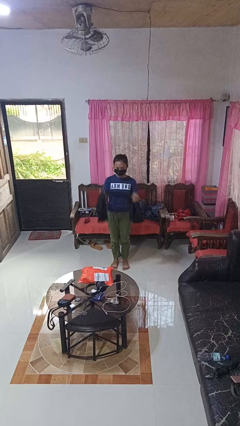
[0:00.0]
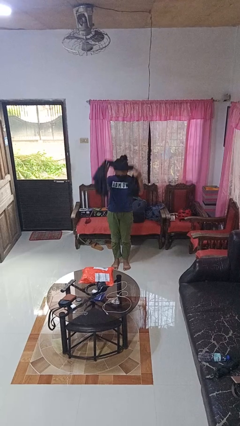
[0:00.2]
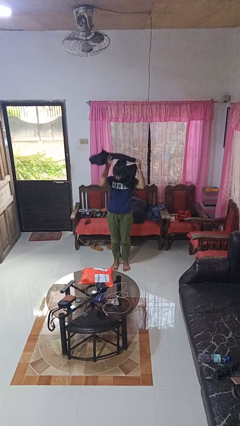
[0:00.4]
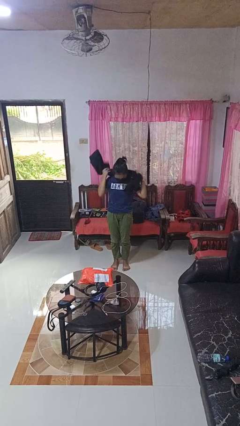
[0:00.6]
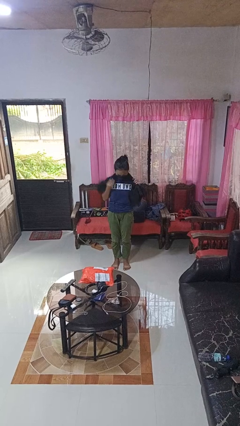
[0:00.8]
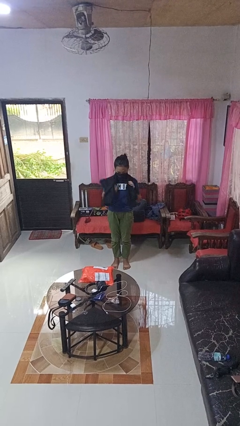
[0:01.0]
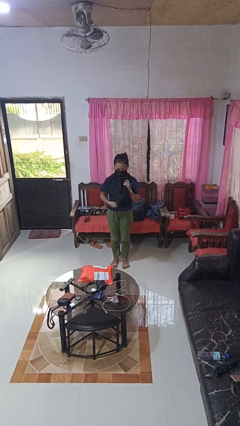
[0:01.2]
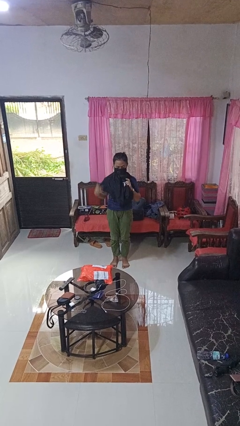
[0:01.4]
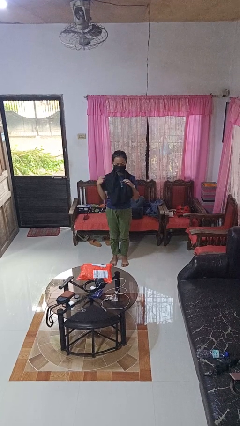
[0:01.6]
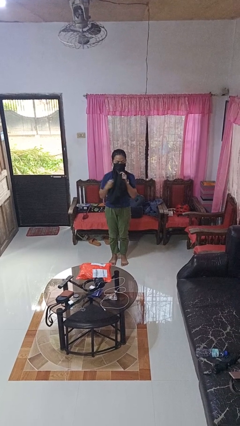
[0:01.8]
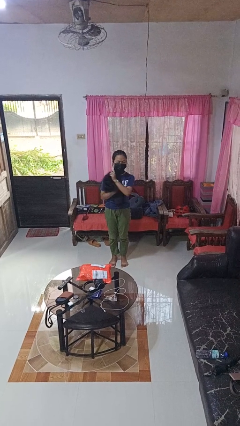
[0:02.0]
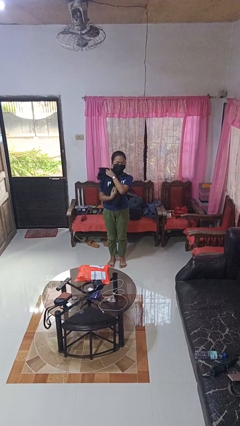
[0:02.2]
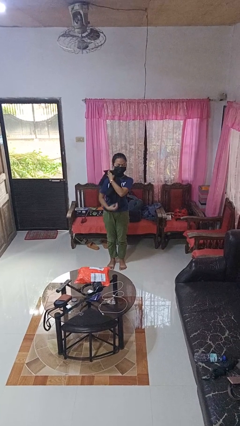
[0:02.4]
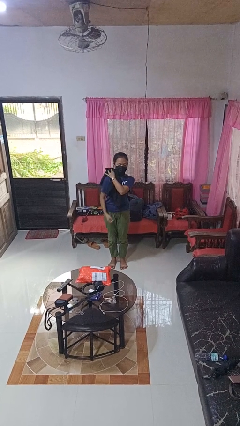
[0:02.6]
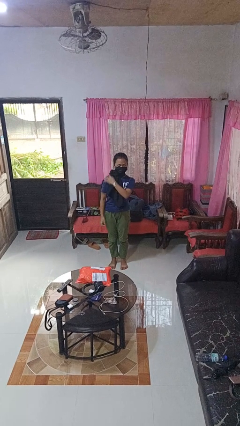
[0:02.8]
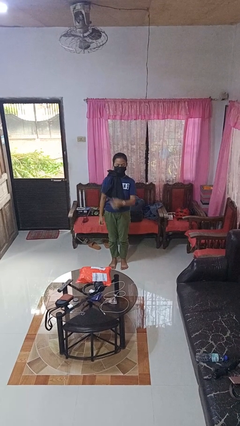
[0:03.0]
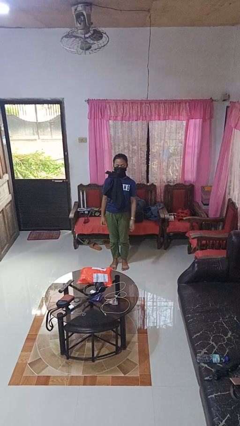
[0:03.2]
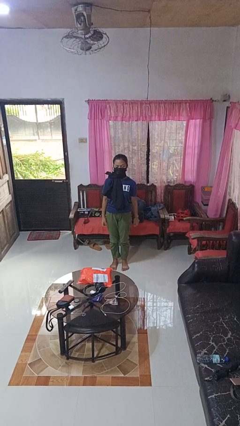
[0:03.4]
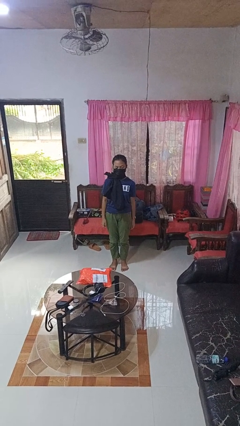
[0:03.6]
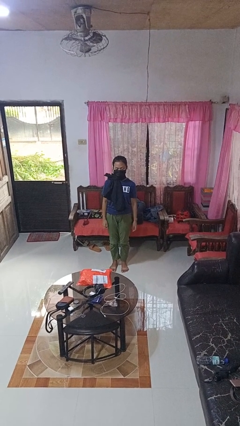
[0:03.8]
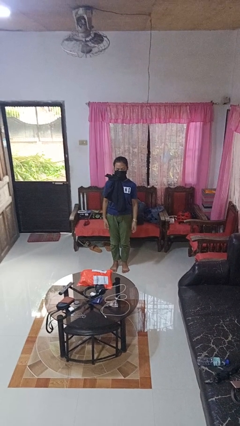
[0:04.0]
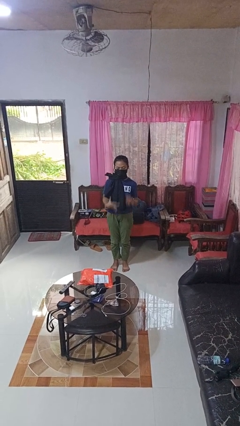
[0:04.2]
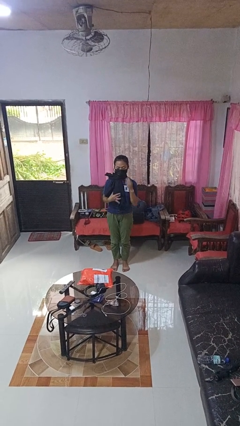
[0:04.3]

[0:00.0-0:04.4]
person puts on scarf

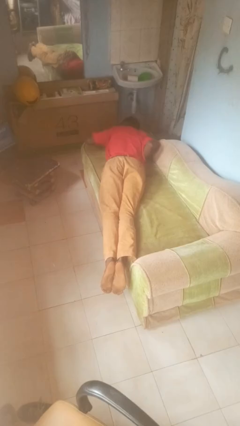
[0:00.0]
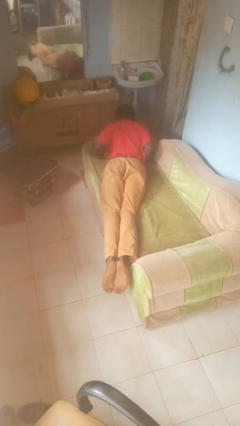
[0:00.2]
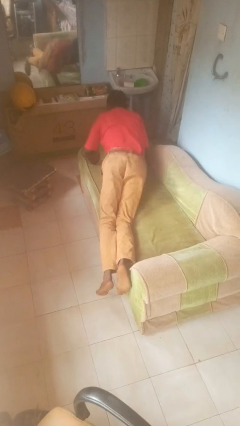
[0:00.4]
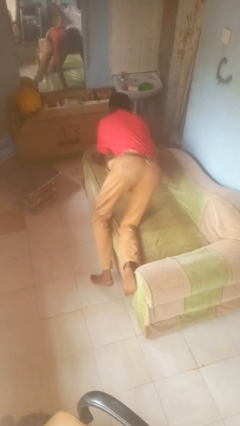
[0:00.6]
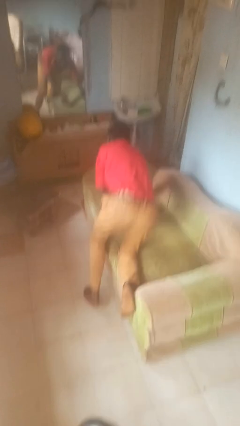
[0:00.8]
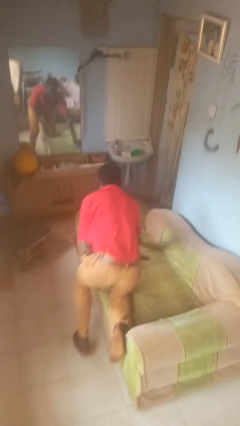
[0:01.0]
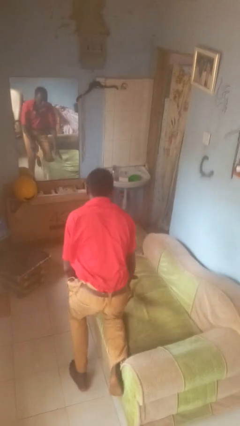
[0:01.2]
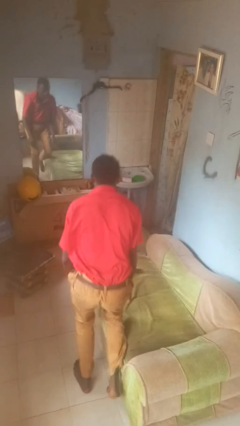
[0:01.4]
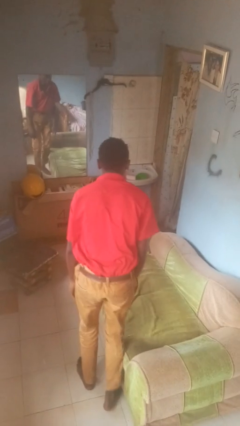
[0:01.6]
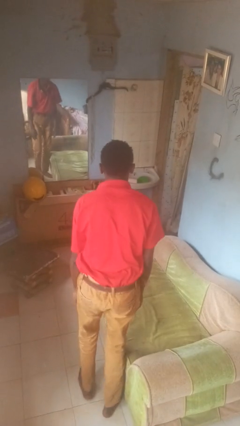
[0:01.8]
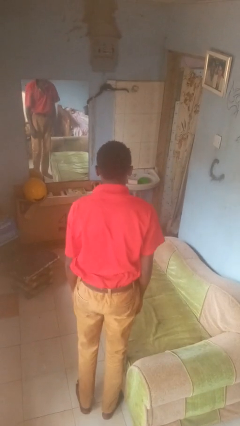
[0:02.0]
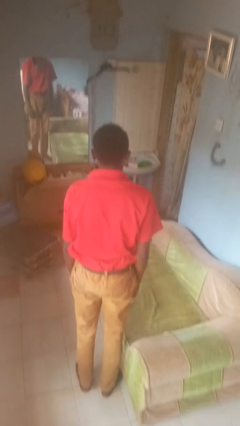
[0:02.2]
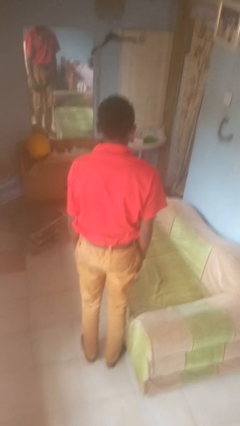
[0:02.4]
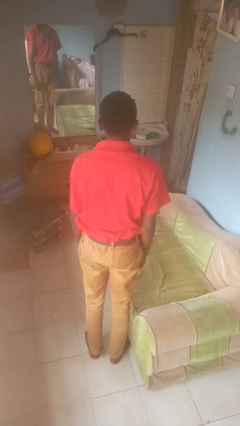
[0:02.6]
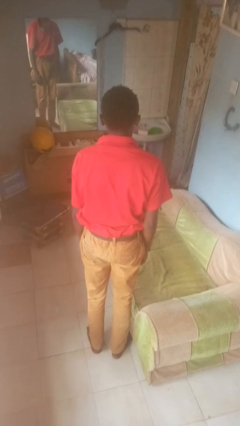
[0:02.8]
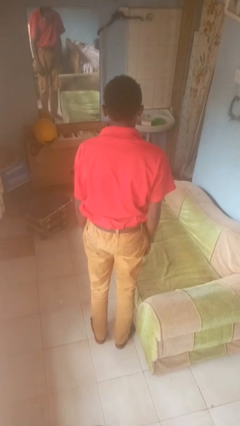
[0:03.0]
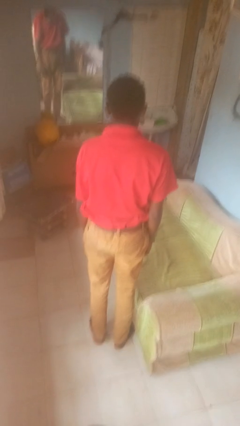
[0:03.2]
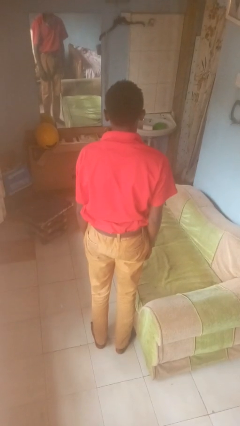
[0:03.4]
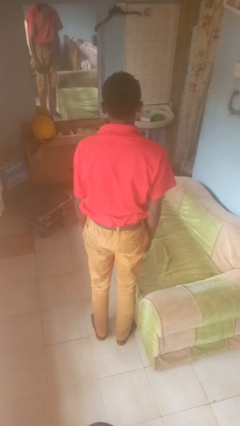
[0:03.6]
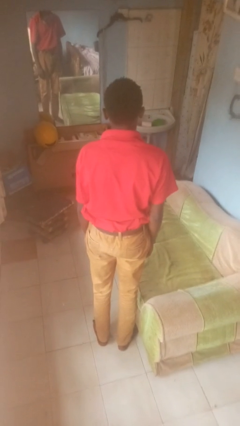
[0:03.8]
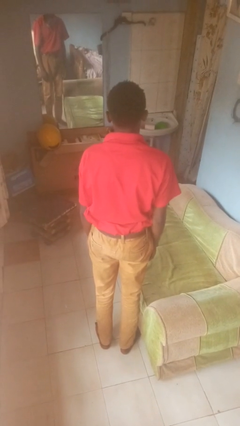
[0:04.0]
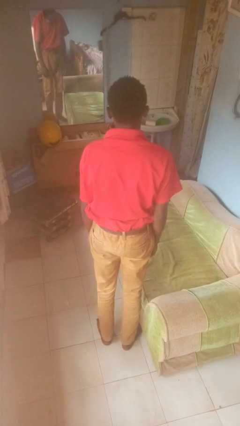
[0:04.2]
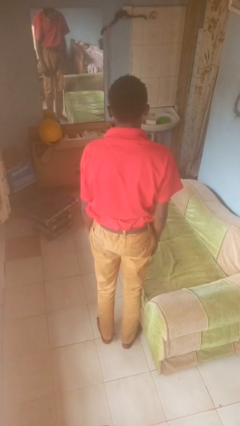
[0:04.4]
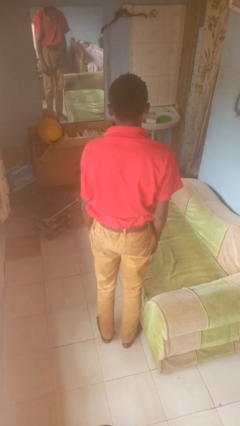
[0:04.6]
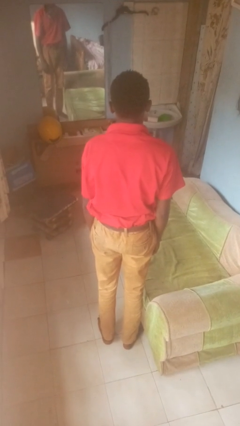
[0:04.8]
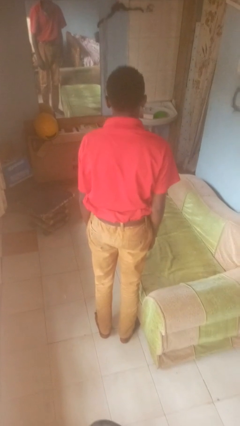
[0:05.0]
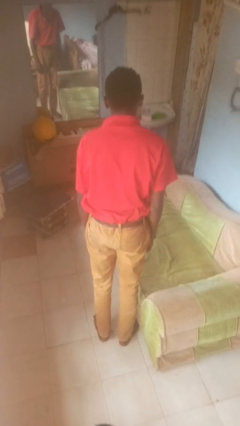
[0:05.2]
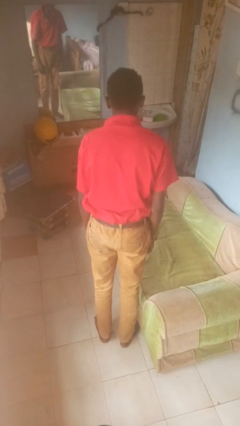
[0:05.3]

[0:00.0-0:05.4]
person stands up

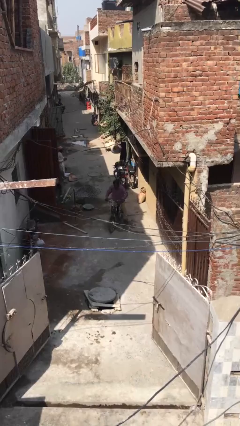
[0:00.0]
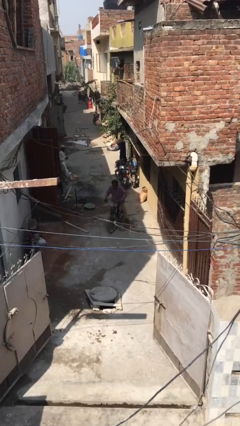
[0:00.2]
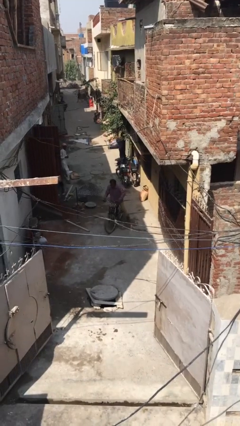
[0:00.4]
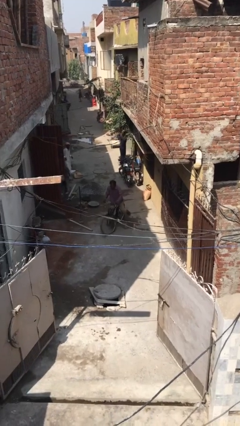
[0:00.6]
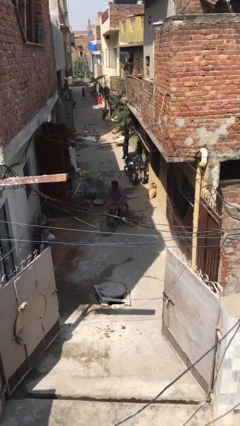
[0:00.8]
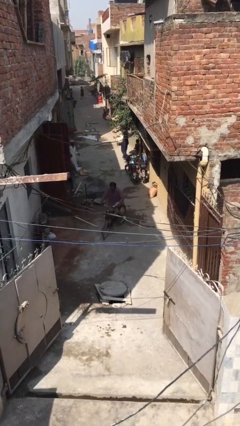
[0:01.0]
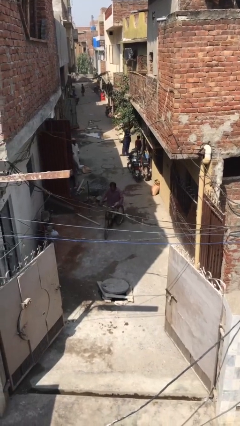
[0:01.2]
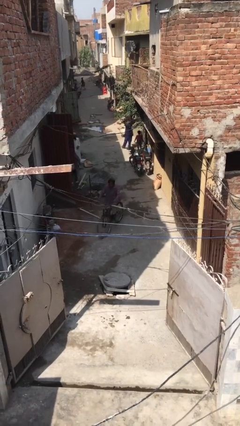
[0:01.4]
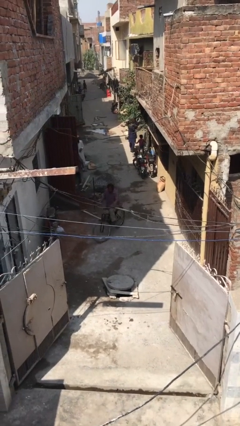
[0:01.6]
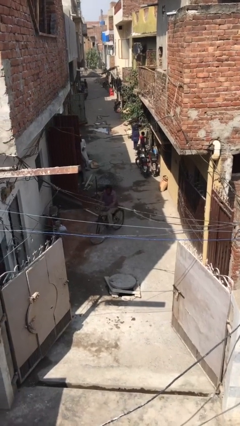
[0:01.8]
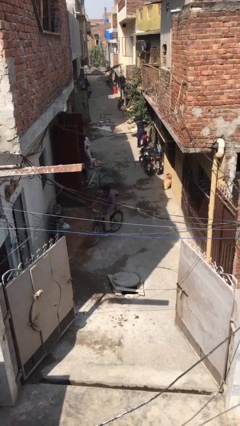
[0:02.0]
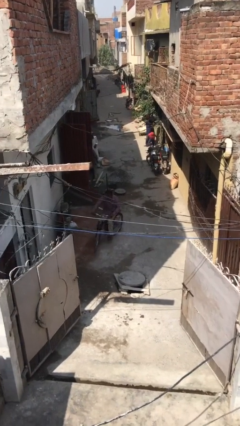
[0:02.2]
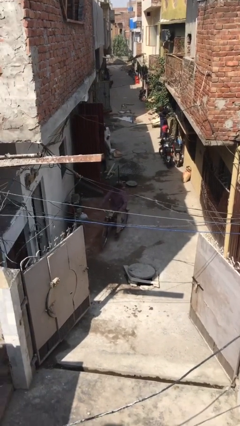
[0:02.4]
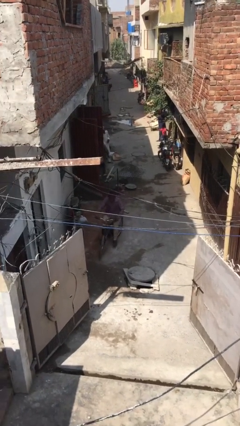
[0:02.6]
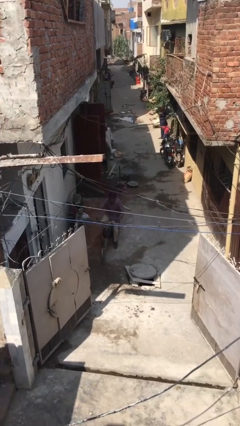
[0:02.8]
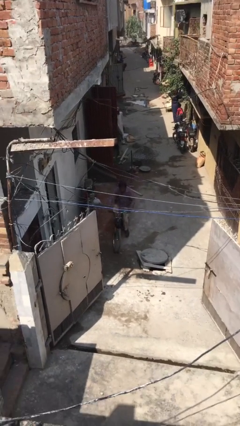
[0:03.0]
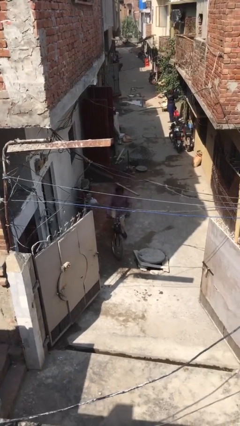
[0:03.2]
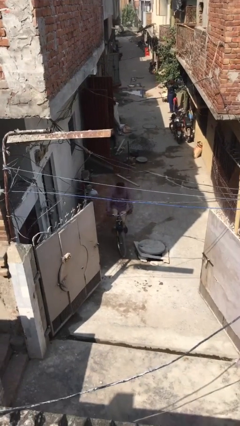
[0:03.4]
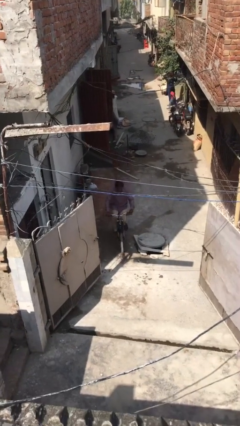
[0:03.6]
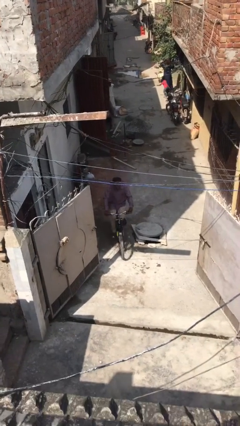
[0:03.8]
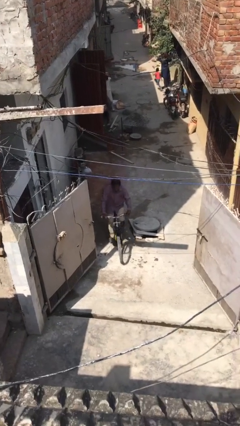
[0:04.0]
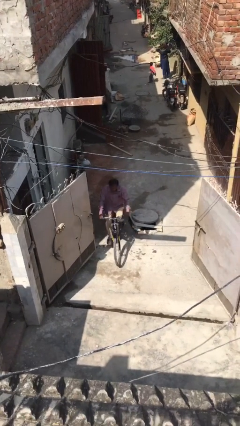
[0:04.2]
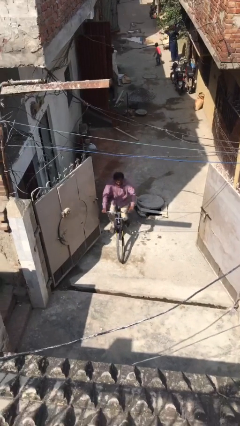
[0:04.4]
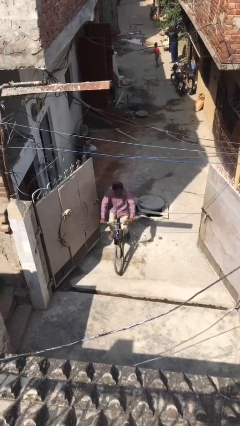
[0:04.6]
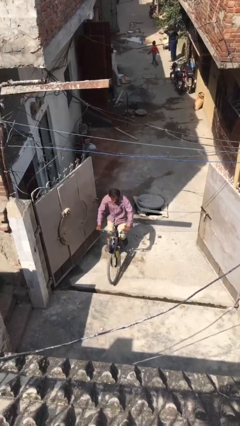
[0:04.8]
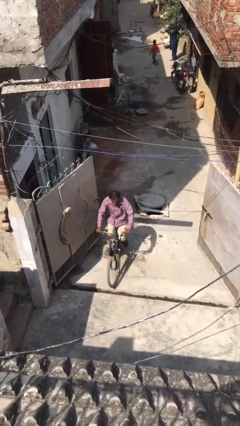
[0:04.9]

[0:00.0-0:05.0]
person rides bicycle

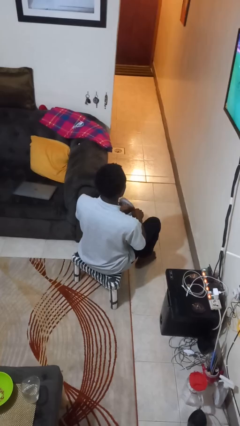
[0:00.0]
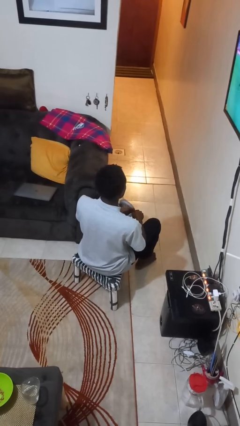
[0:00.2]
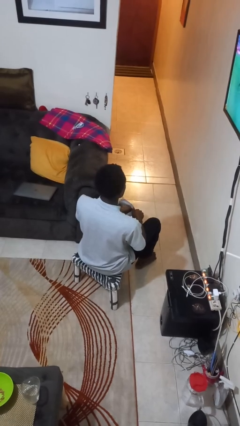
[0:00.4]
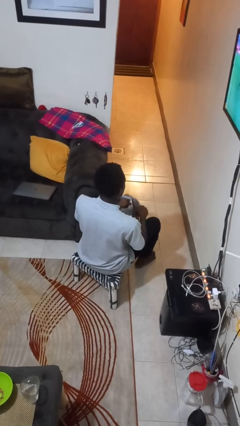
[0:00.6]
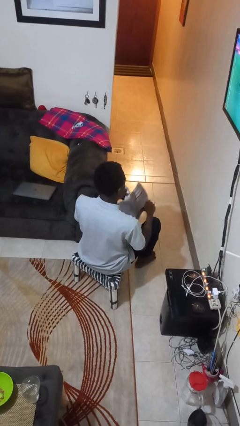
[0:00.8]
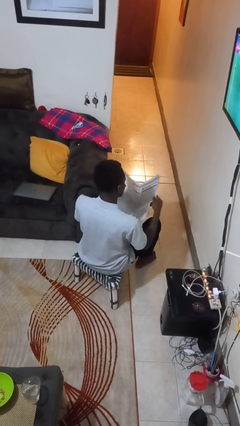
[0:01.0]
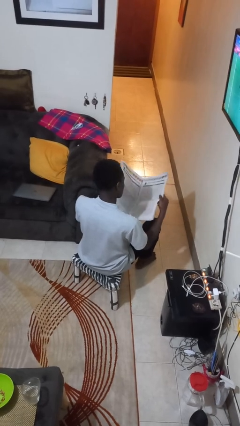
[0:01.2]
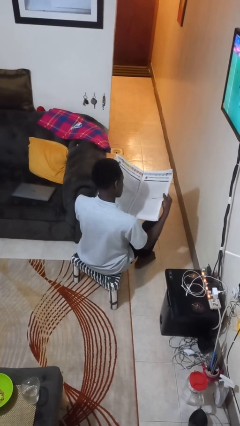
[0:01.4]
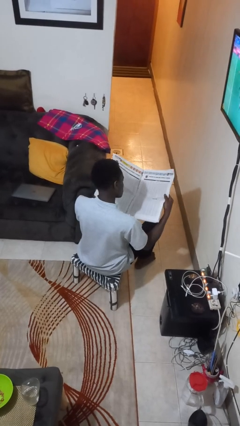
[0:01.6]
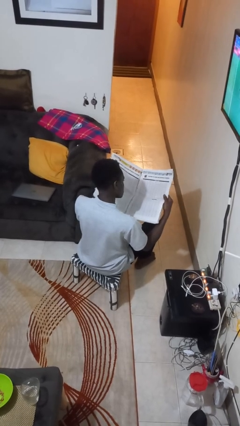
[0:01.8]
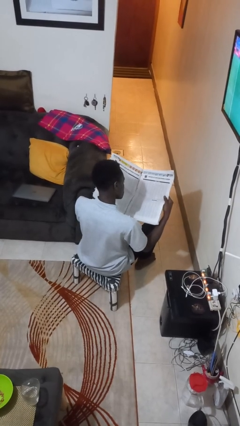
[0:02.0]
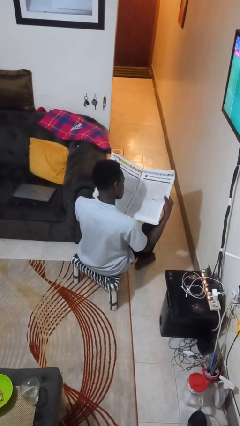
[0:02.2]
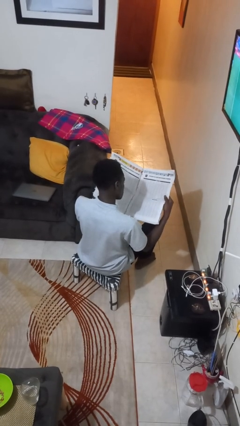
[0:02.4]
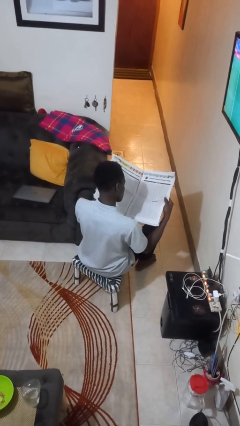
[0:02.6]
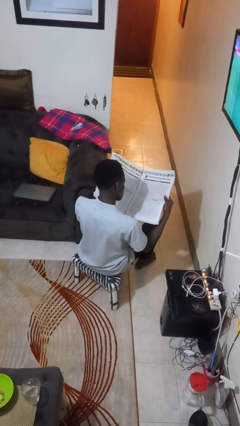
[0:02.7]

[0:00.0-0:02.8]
person reads newspaper
